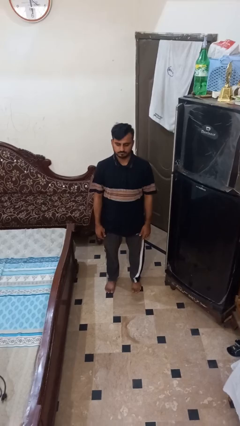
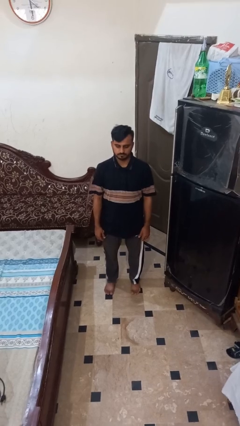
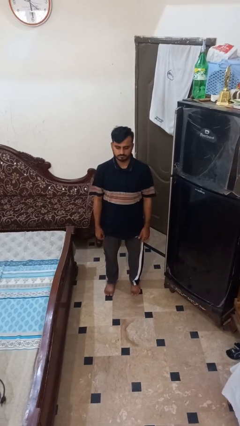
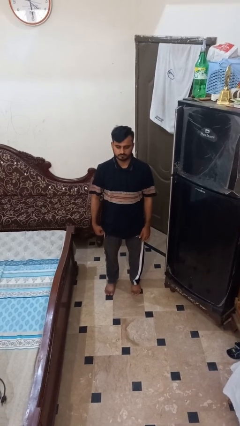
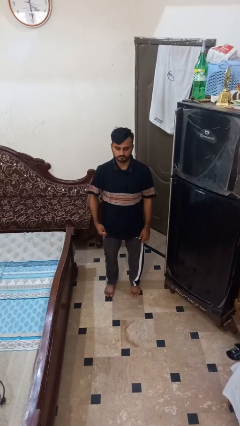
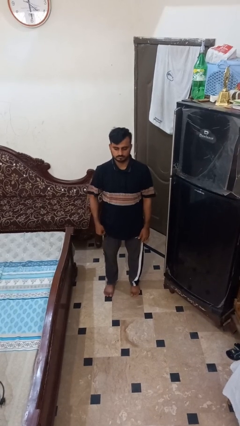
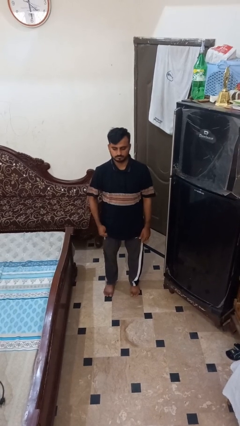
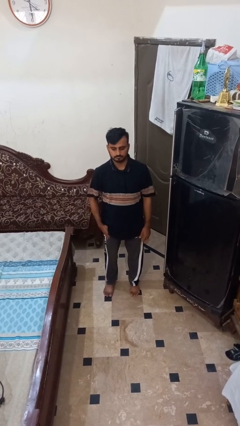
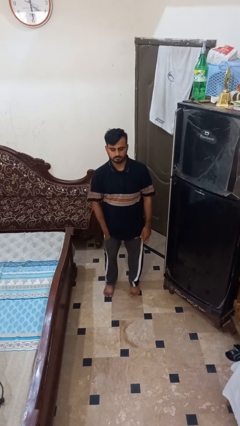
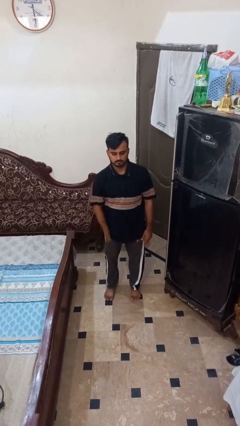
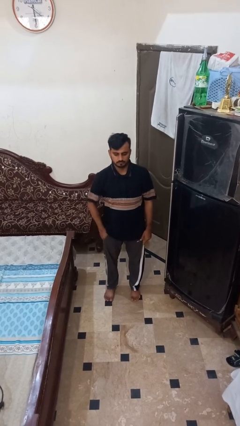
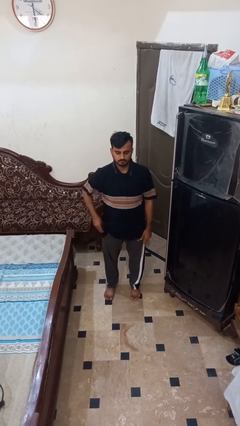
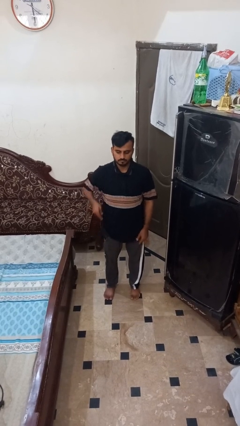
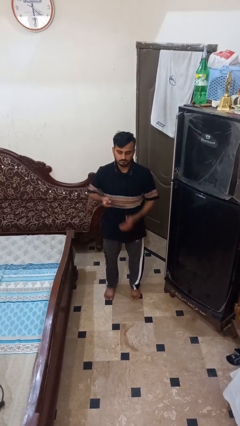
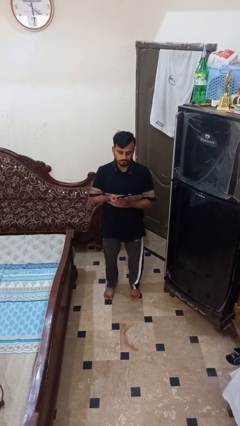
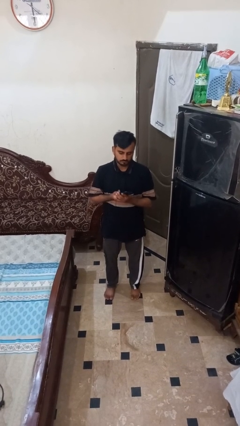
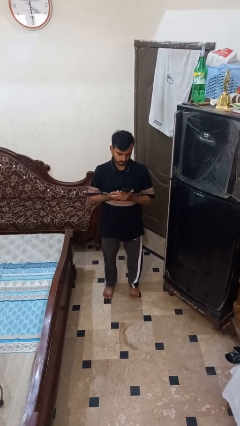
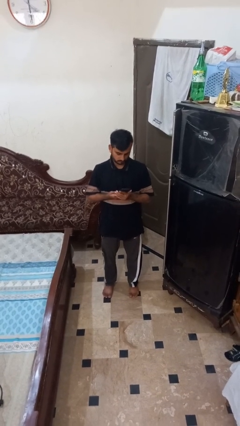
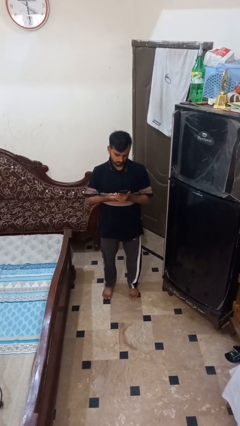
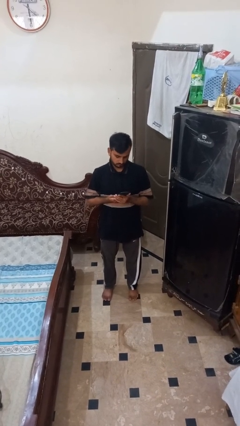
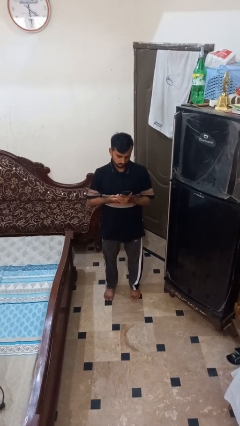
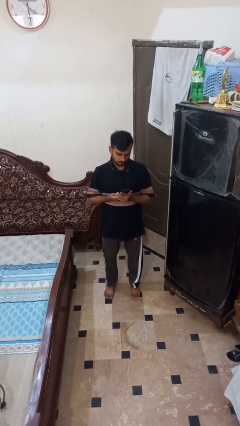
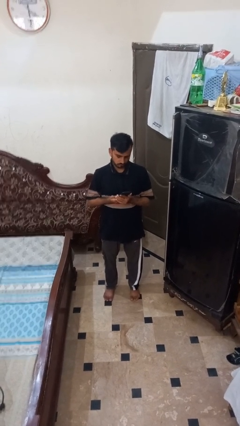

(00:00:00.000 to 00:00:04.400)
person takes phone from pocket

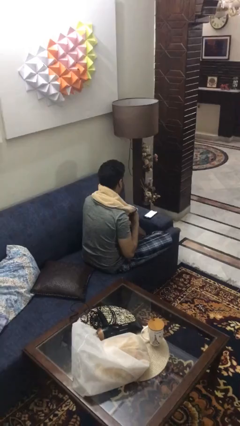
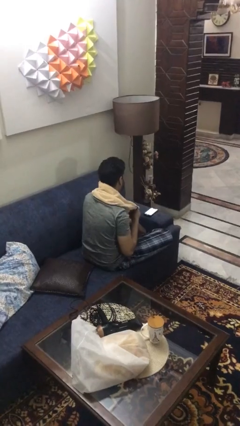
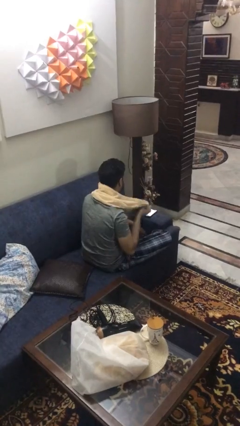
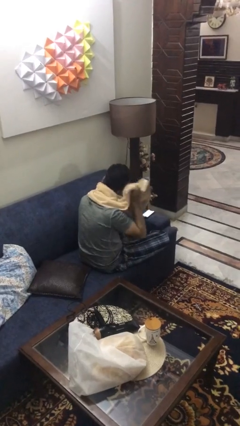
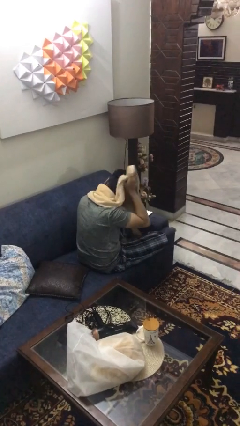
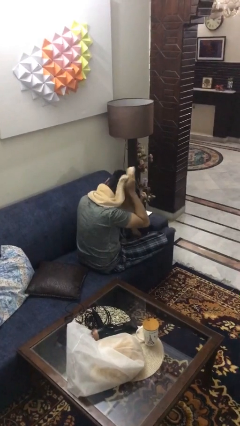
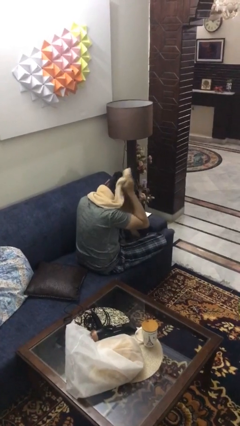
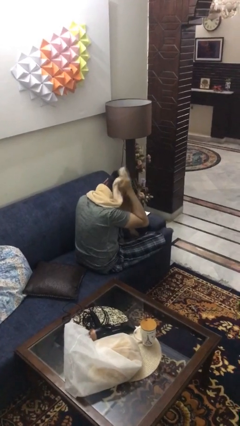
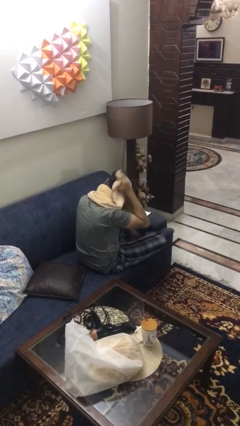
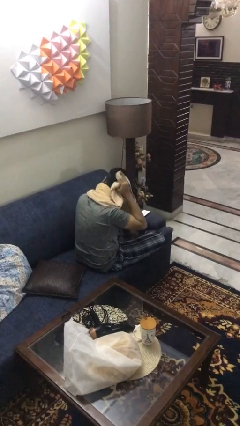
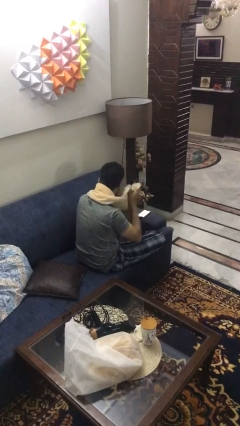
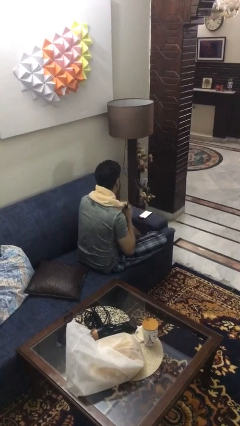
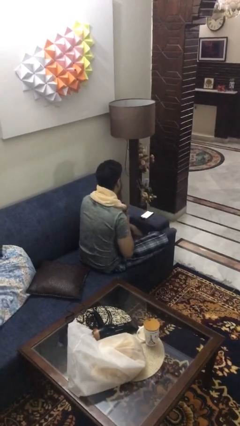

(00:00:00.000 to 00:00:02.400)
person dries hair with towel

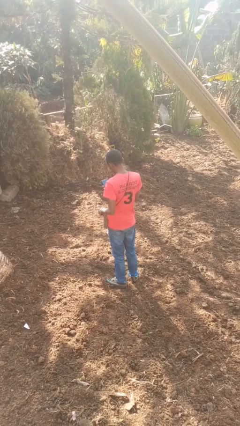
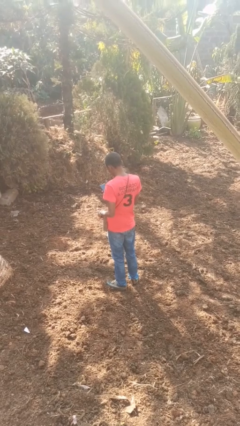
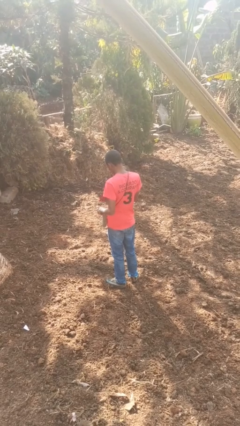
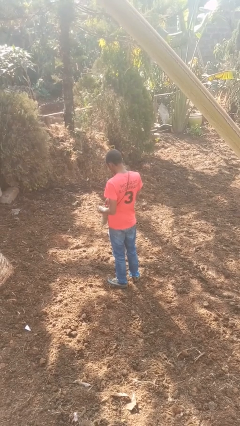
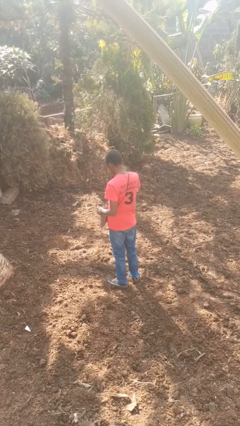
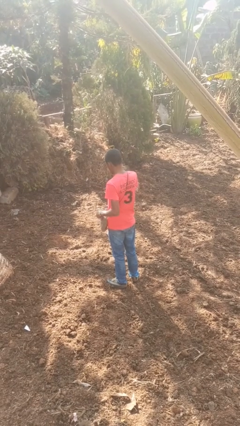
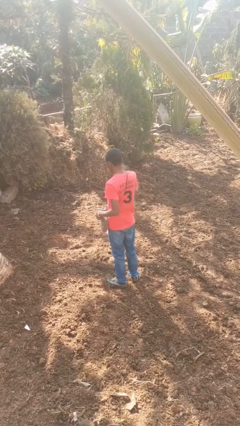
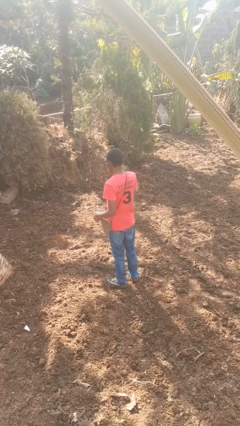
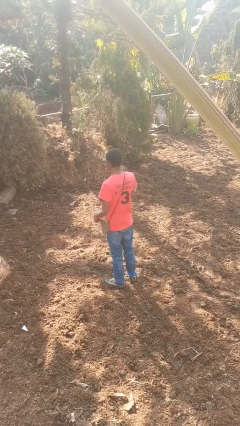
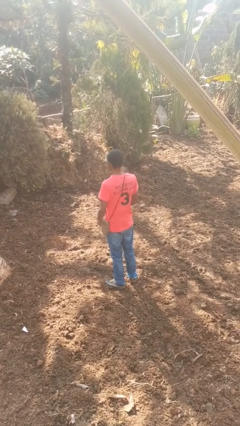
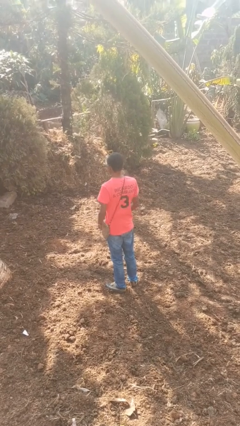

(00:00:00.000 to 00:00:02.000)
person puts object into purse

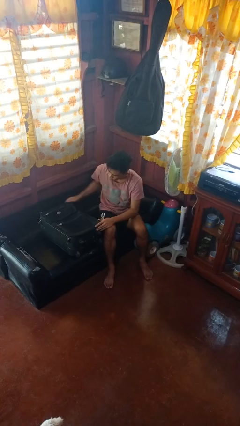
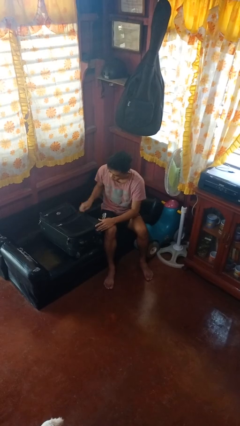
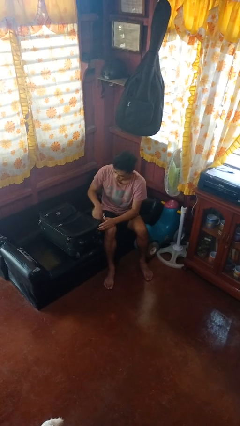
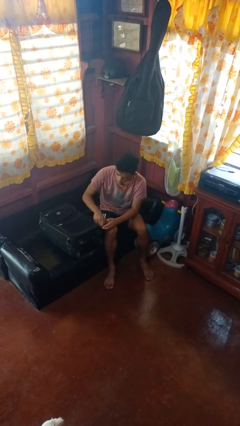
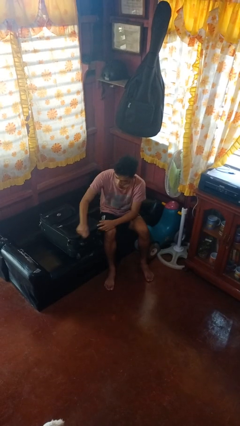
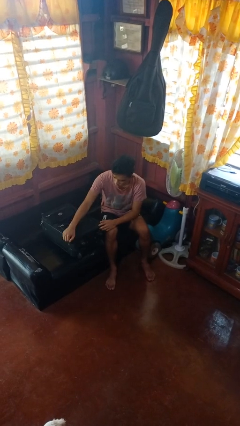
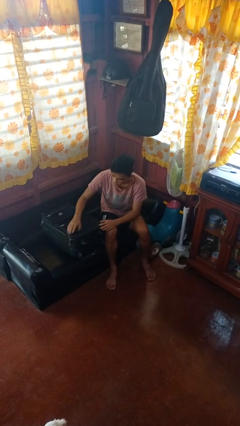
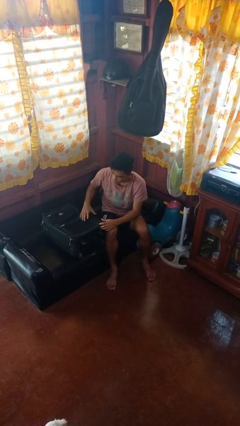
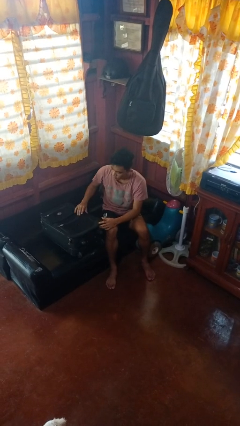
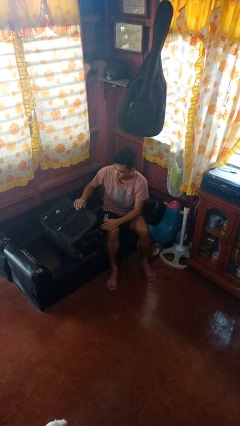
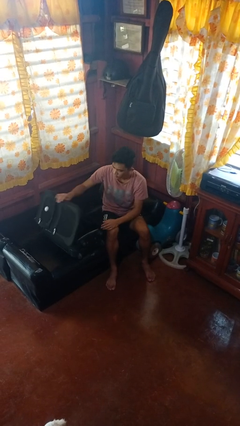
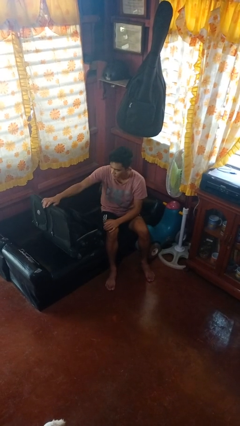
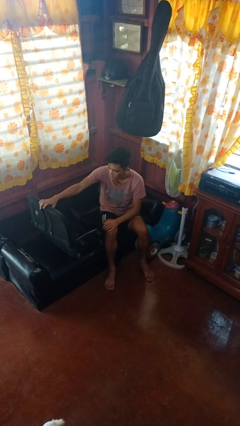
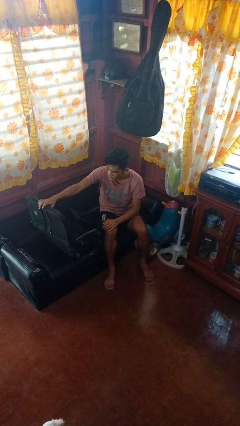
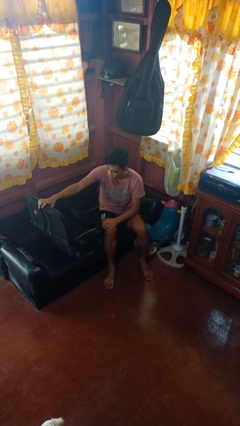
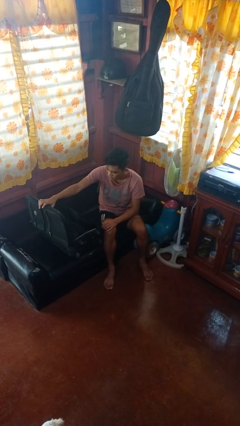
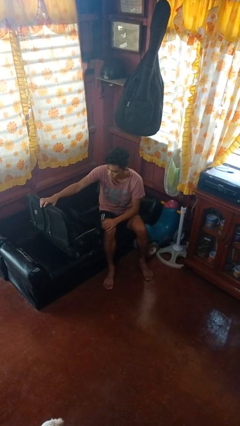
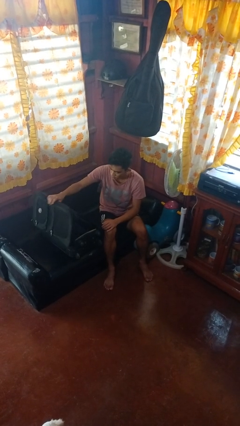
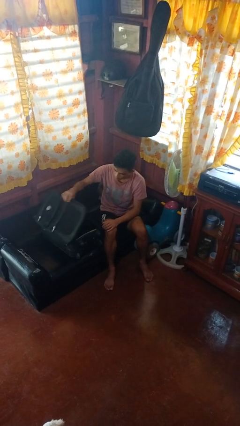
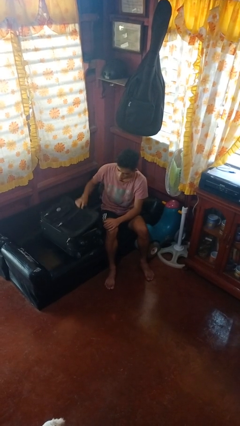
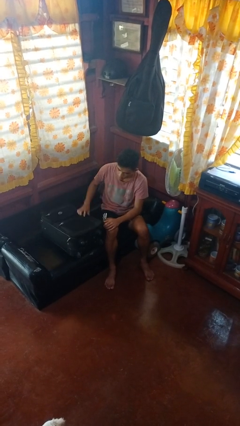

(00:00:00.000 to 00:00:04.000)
person opens suitcase

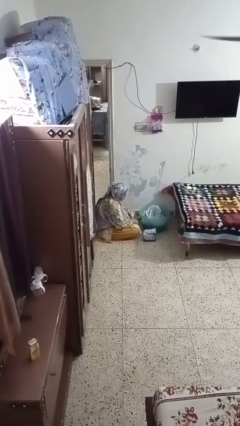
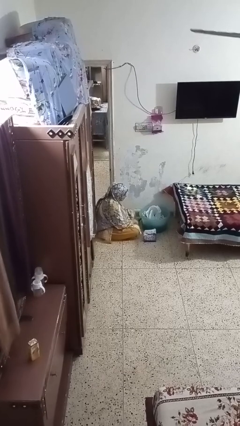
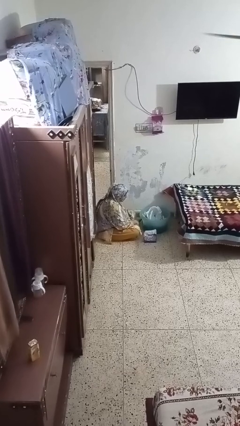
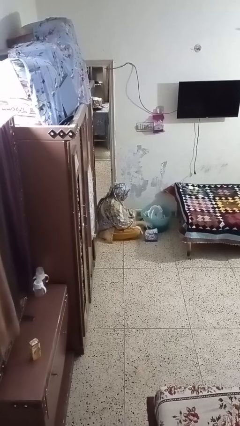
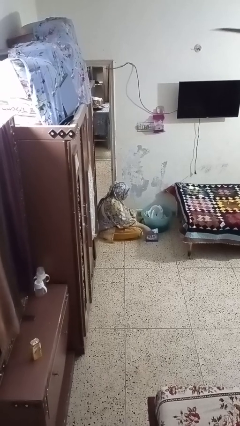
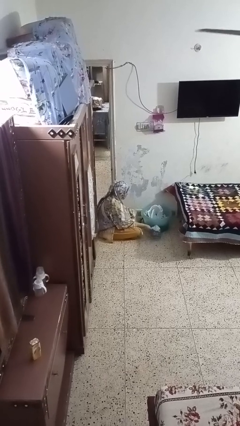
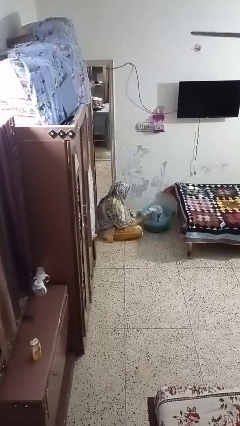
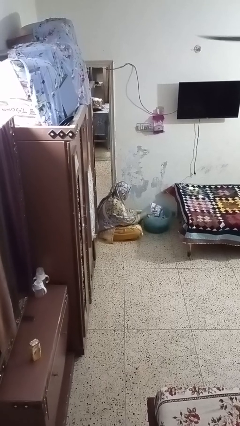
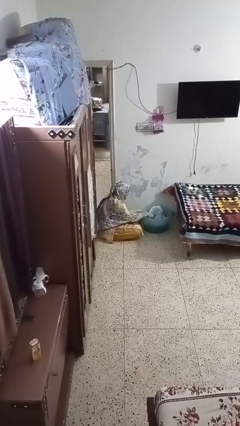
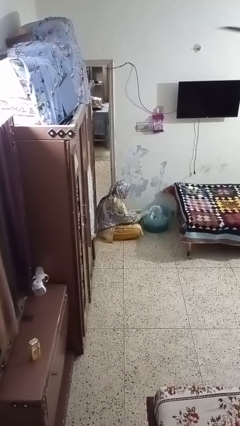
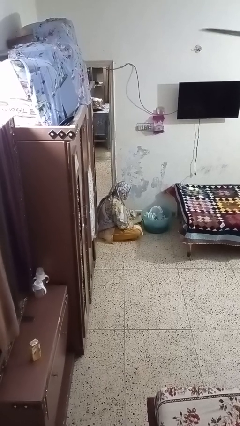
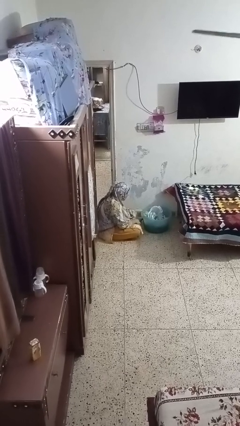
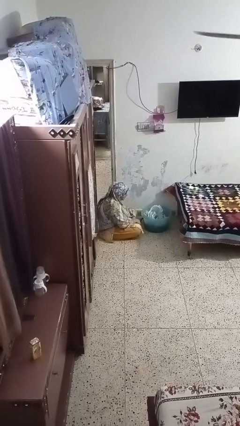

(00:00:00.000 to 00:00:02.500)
person puts object into basket

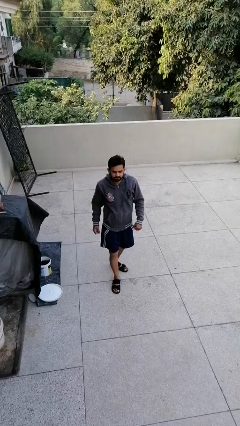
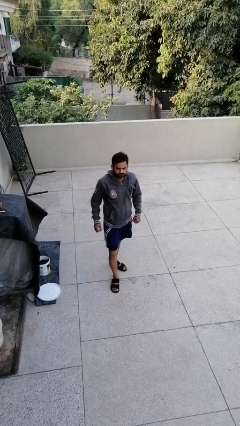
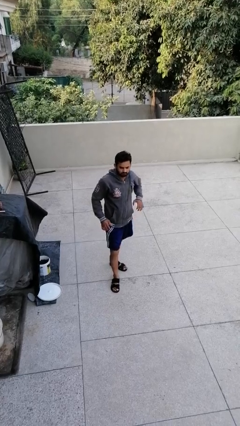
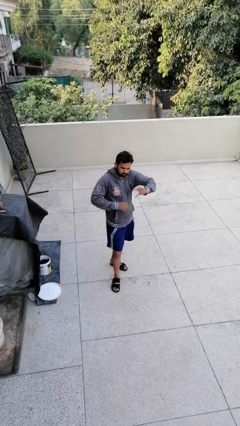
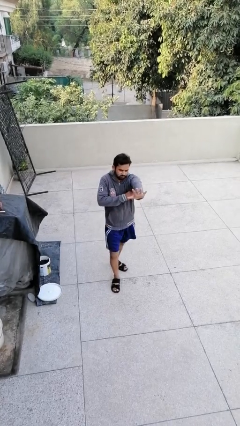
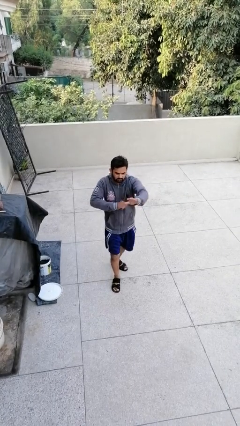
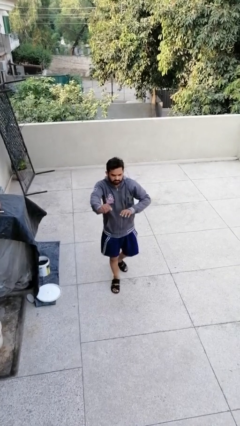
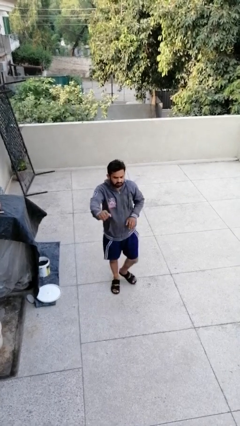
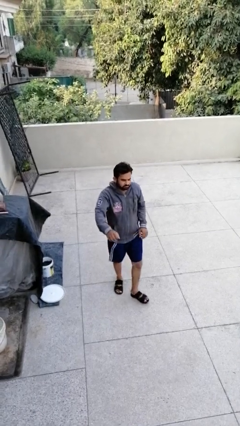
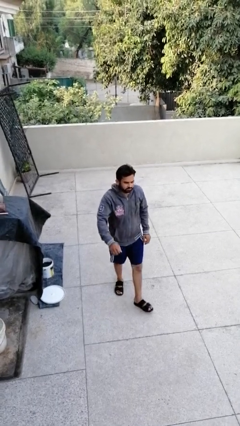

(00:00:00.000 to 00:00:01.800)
person karate chop

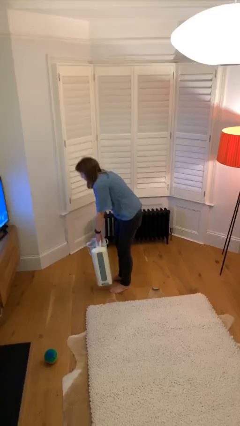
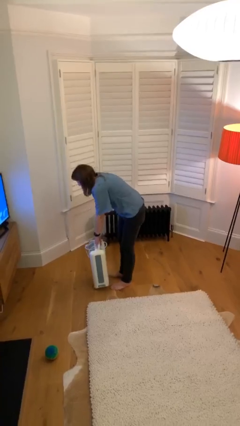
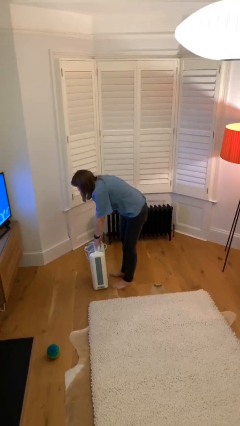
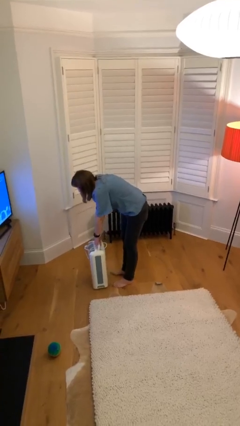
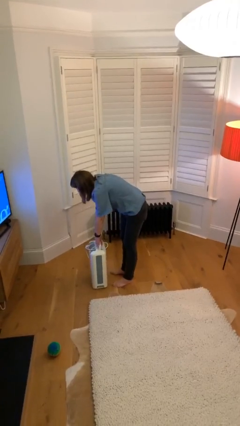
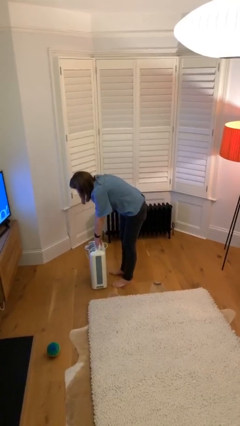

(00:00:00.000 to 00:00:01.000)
person puts down object on floor
